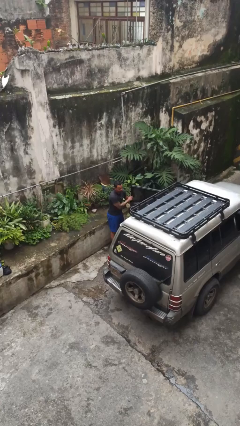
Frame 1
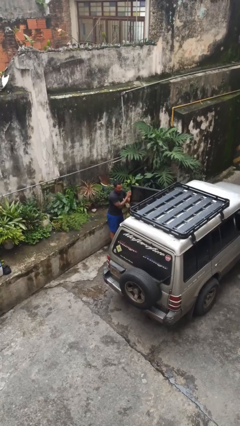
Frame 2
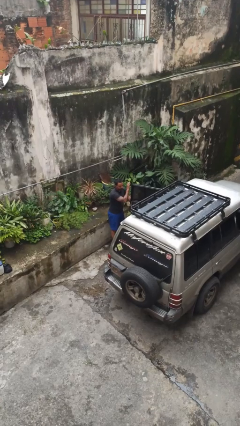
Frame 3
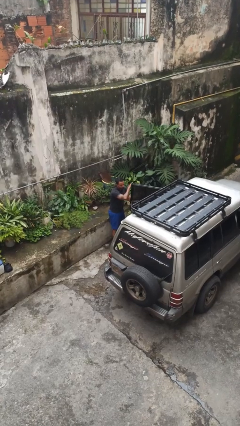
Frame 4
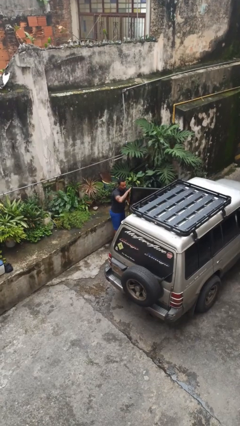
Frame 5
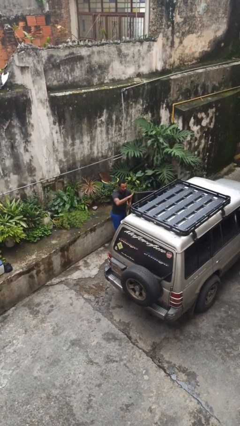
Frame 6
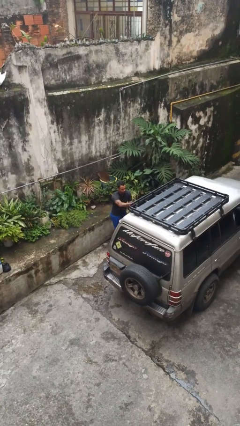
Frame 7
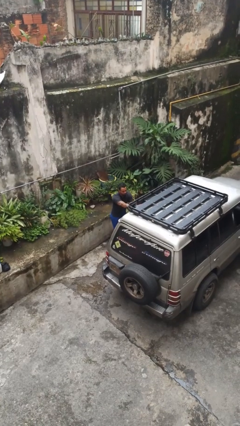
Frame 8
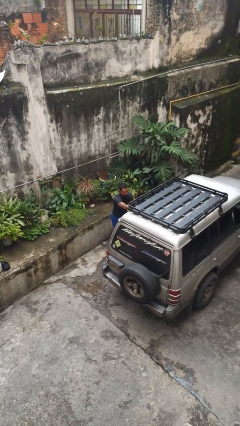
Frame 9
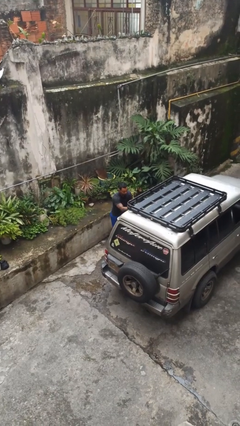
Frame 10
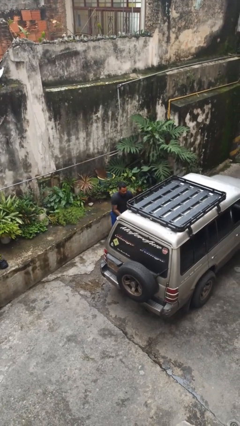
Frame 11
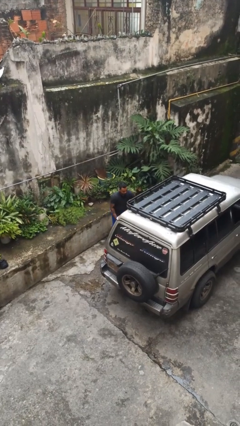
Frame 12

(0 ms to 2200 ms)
person closes car door

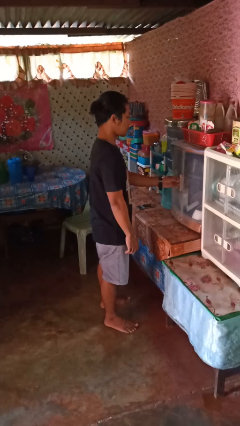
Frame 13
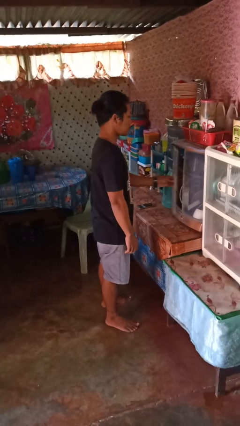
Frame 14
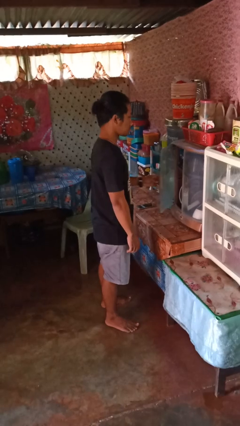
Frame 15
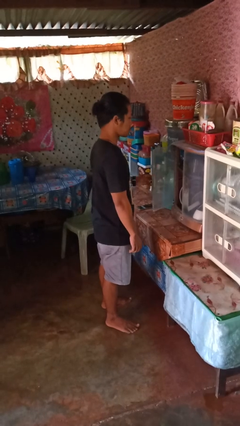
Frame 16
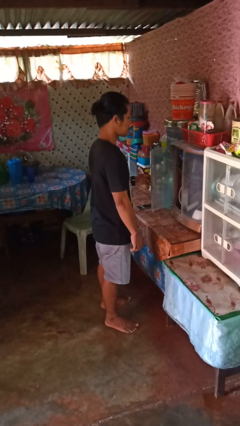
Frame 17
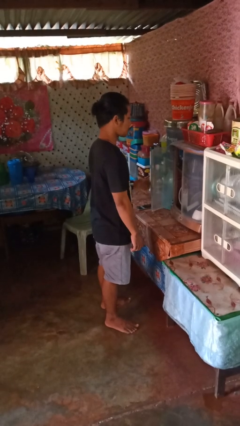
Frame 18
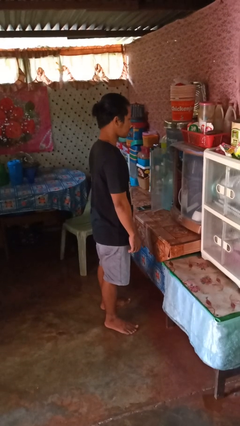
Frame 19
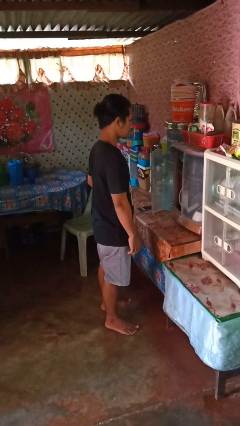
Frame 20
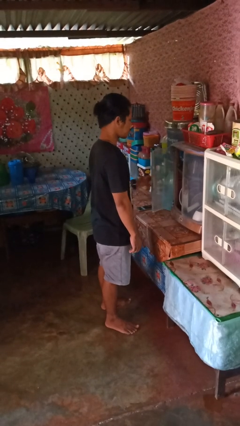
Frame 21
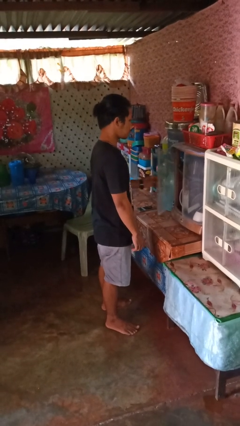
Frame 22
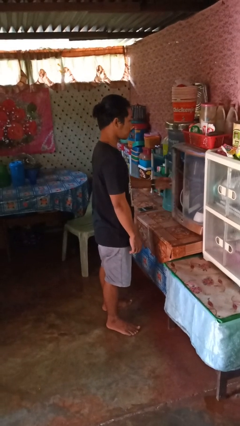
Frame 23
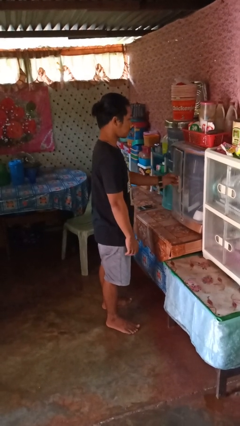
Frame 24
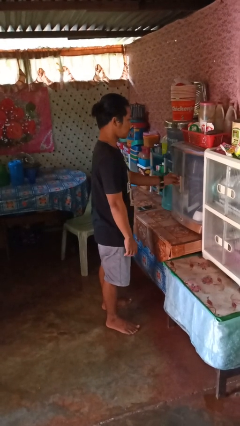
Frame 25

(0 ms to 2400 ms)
person opens cabinet

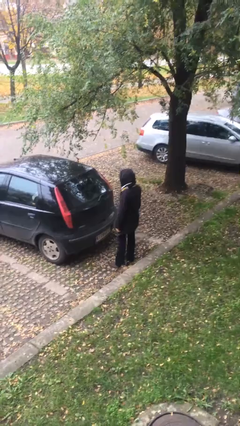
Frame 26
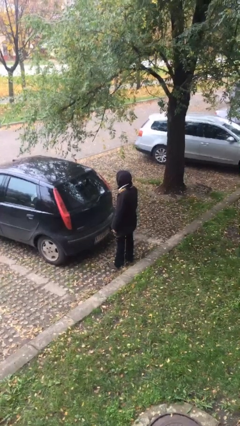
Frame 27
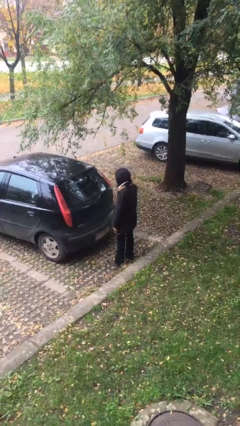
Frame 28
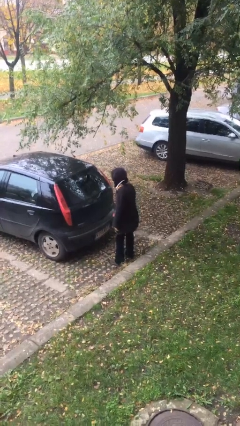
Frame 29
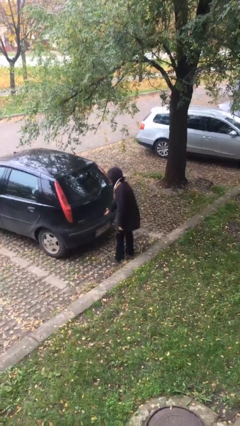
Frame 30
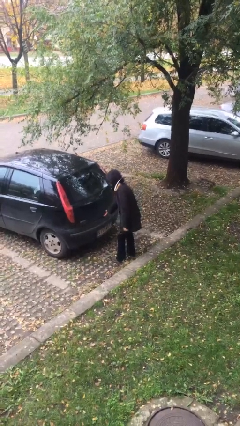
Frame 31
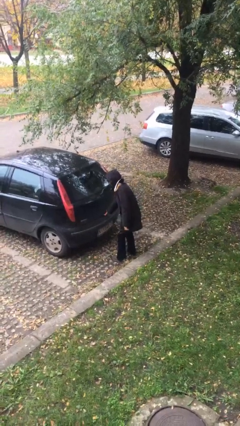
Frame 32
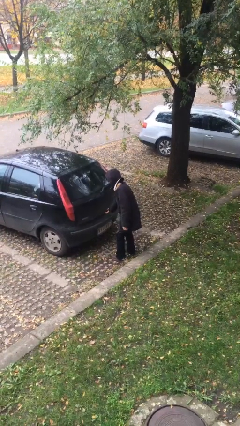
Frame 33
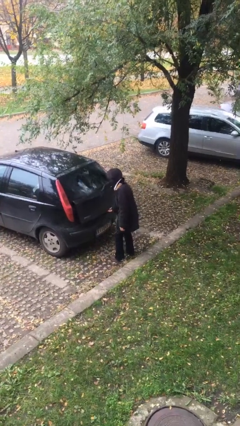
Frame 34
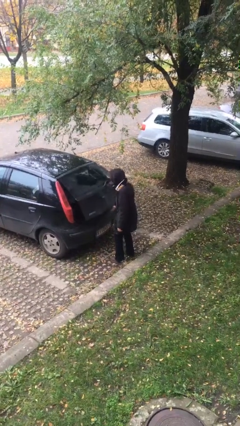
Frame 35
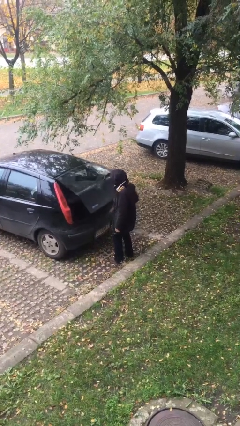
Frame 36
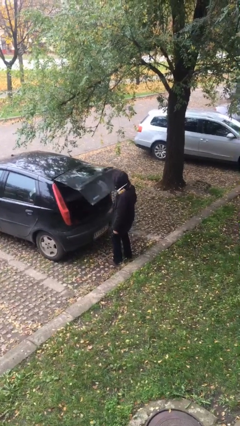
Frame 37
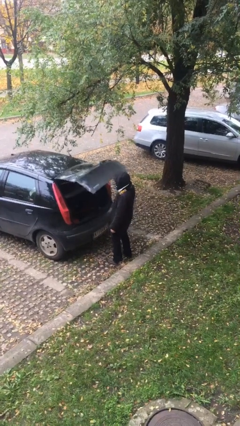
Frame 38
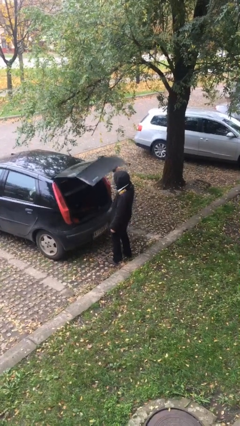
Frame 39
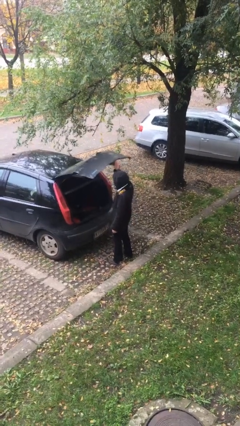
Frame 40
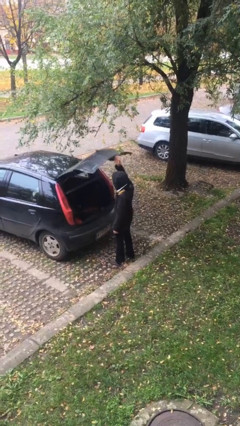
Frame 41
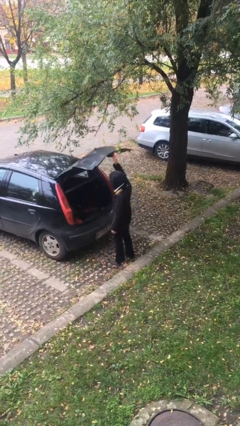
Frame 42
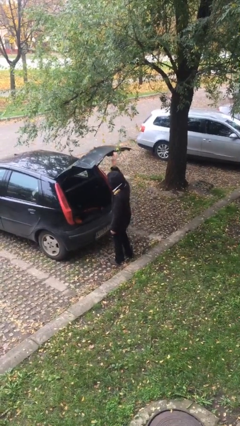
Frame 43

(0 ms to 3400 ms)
person opens car trunk

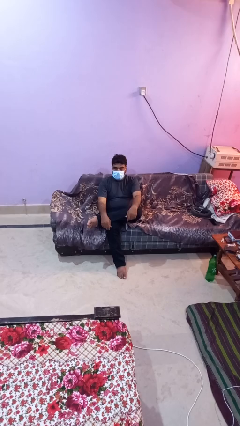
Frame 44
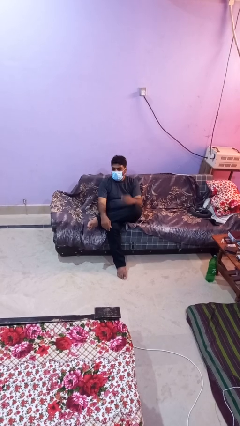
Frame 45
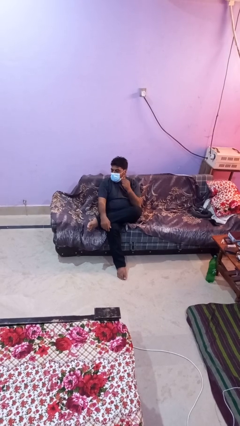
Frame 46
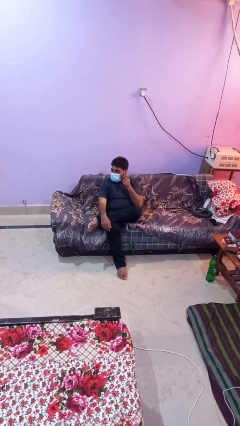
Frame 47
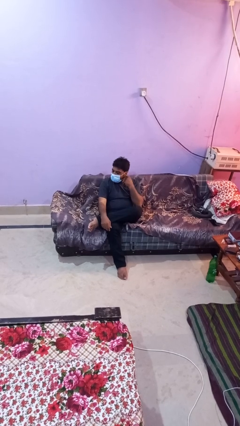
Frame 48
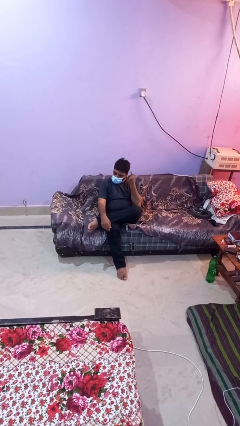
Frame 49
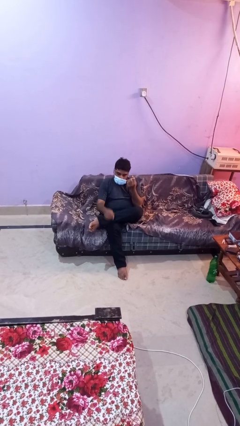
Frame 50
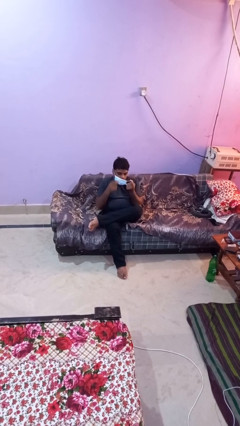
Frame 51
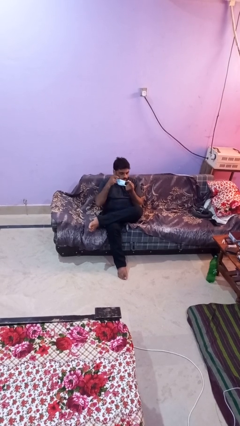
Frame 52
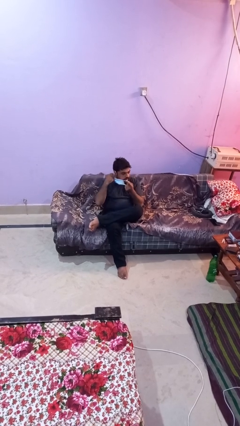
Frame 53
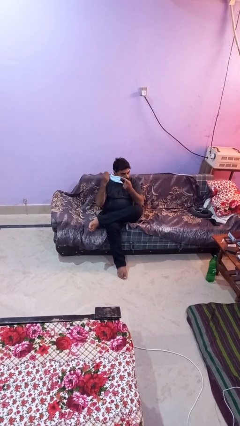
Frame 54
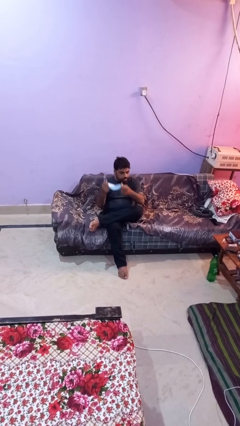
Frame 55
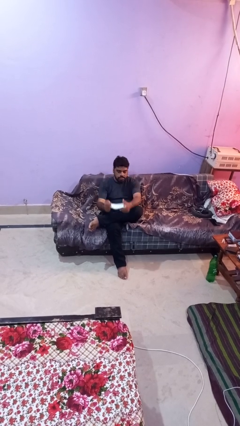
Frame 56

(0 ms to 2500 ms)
person takes off facemask

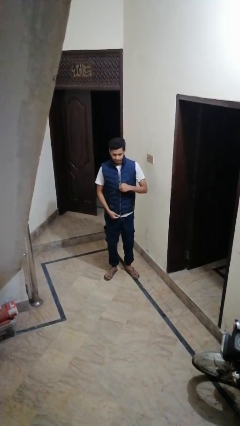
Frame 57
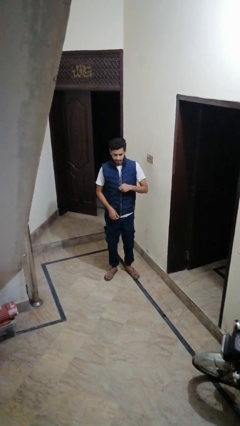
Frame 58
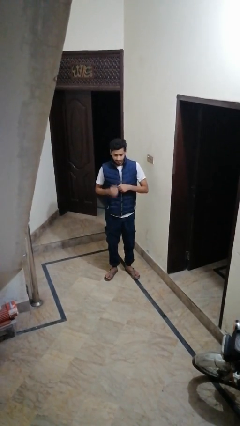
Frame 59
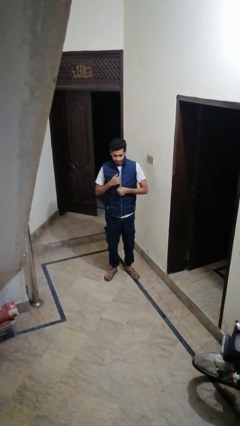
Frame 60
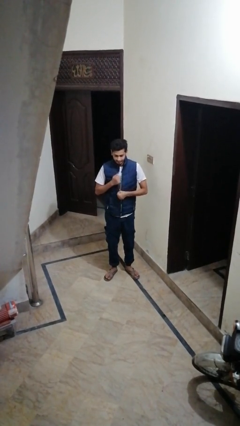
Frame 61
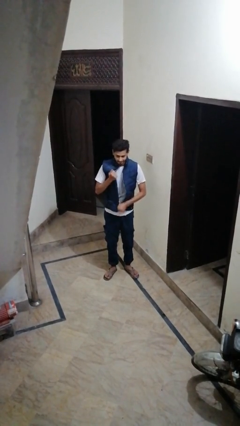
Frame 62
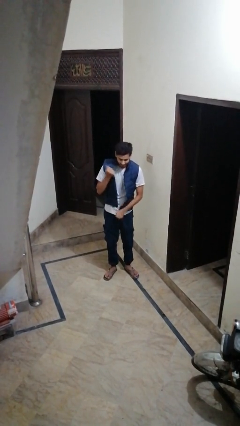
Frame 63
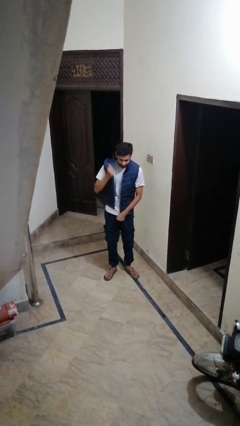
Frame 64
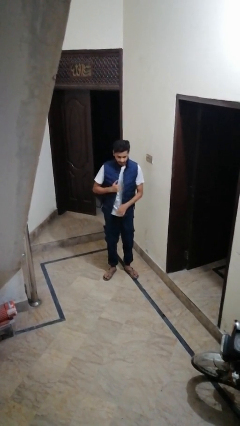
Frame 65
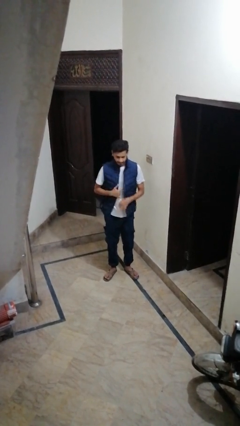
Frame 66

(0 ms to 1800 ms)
person unzips jacket

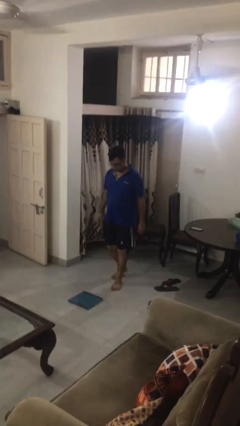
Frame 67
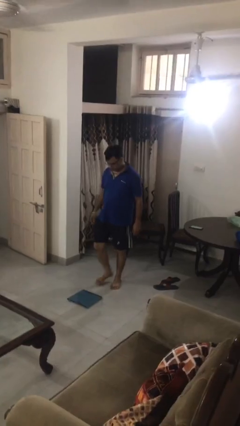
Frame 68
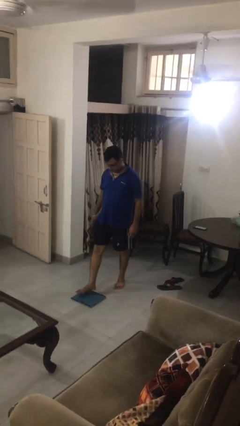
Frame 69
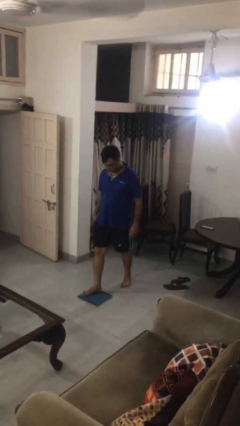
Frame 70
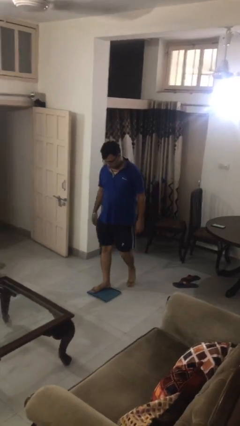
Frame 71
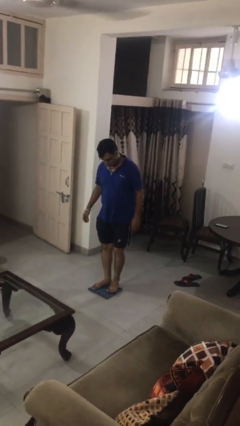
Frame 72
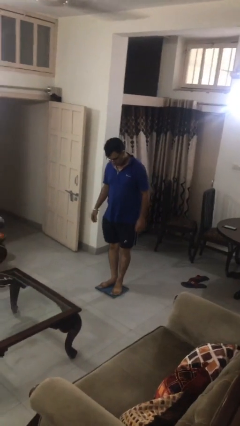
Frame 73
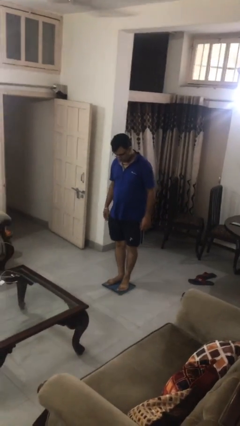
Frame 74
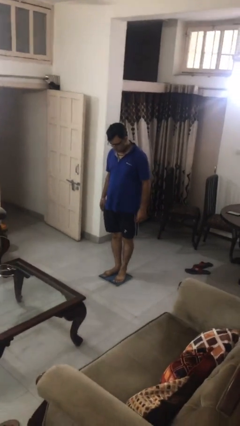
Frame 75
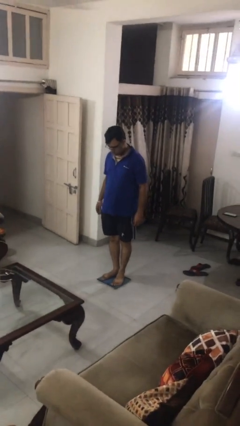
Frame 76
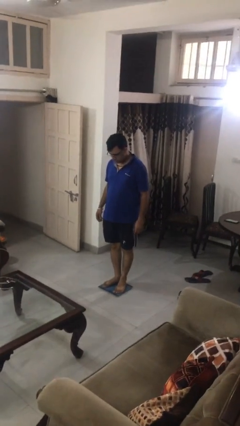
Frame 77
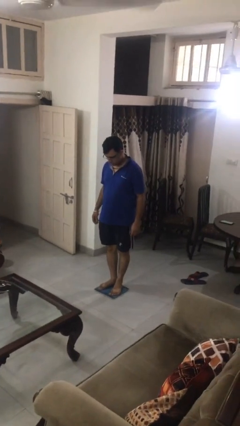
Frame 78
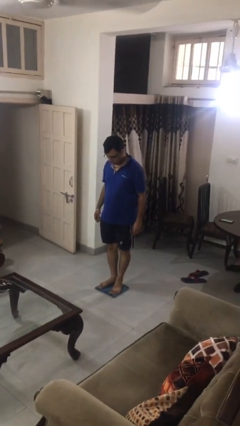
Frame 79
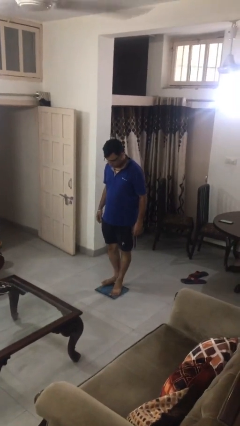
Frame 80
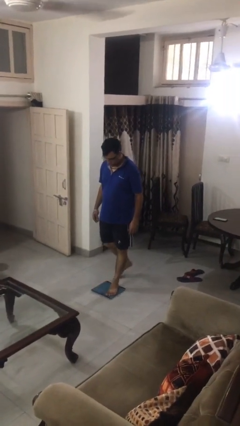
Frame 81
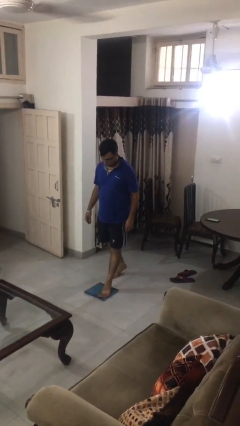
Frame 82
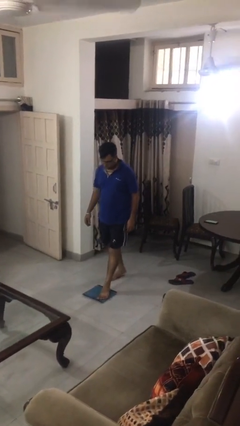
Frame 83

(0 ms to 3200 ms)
person uses bodyweight scale

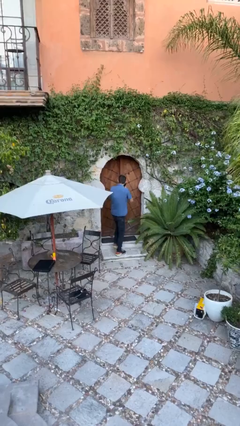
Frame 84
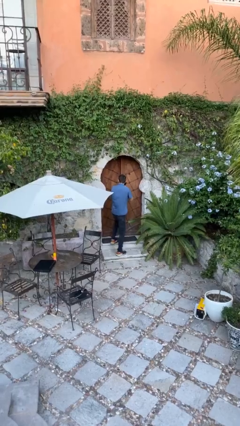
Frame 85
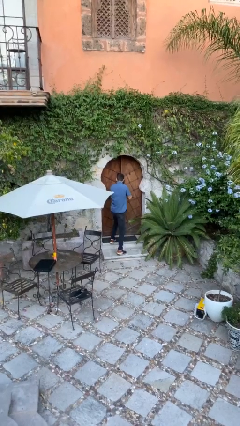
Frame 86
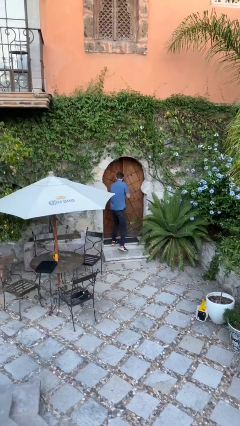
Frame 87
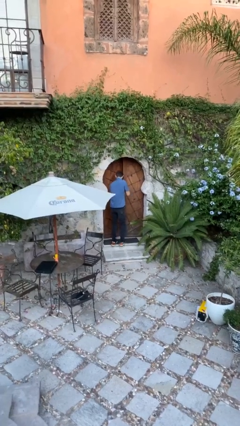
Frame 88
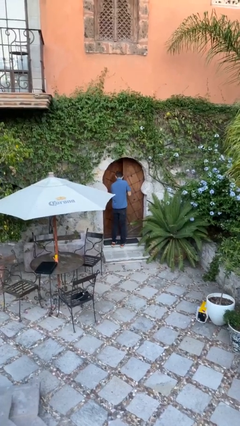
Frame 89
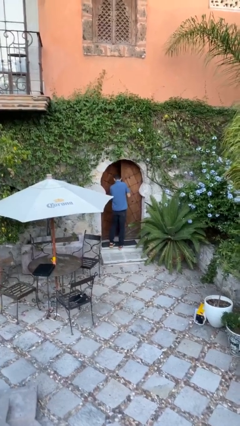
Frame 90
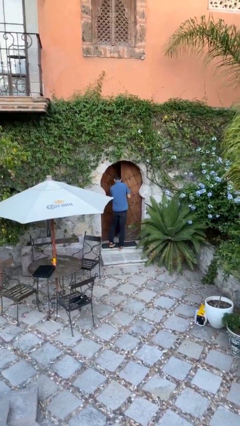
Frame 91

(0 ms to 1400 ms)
person opens facility door

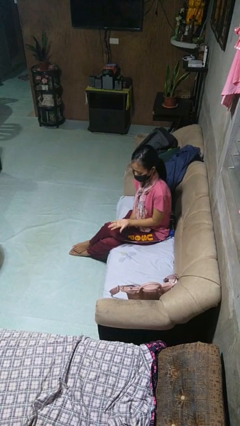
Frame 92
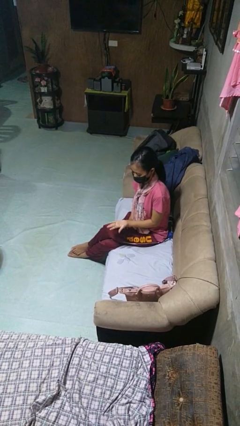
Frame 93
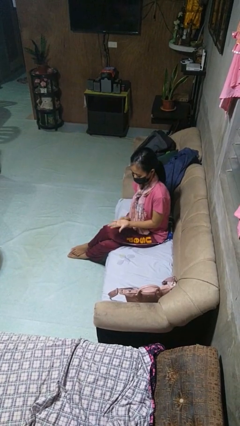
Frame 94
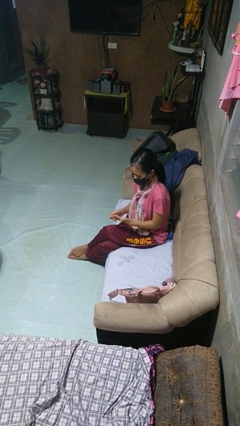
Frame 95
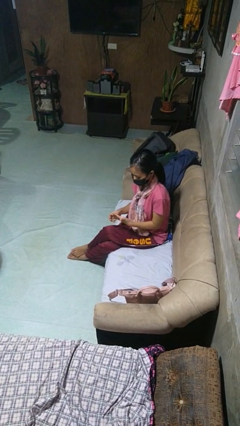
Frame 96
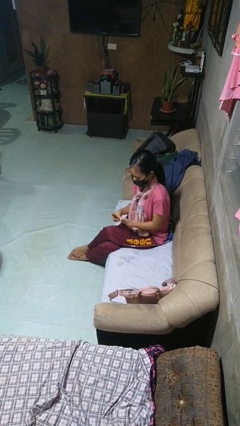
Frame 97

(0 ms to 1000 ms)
person takes off ring
